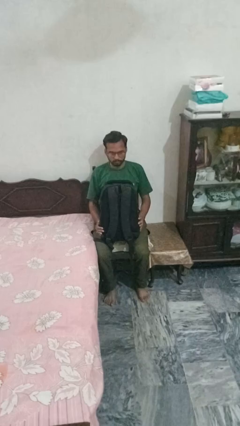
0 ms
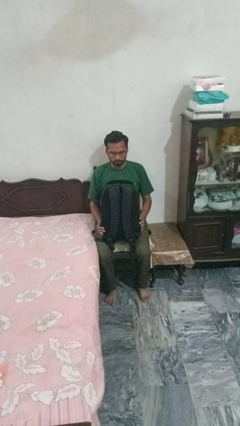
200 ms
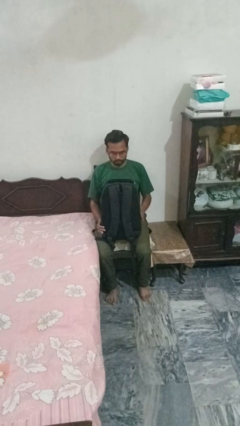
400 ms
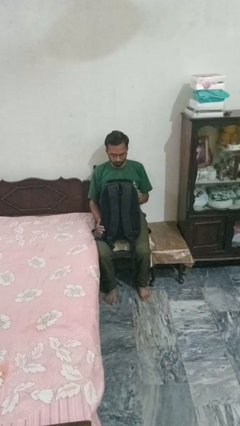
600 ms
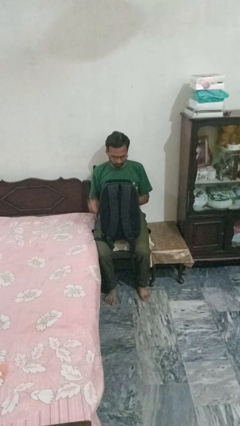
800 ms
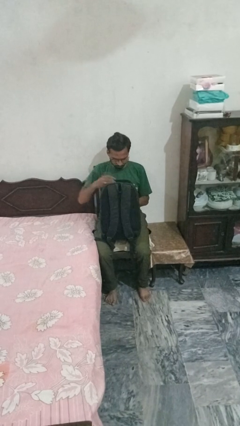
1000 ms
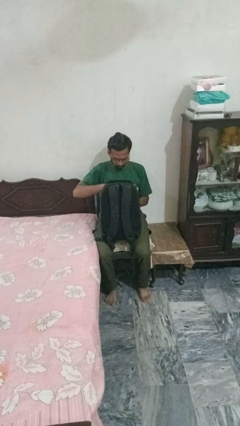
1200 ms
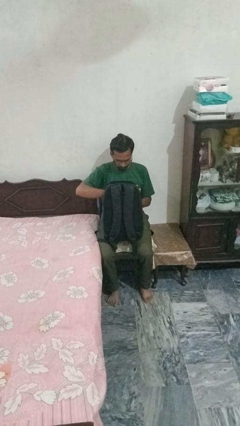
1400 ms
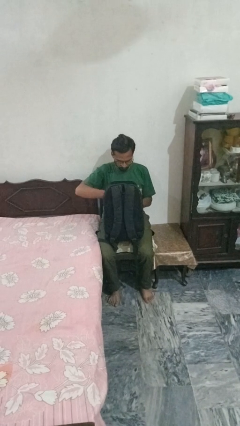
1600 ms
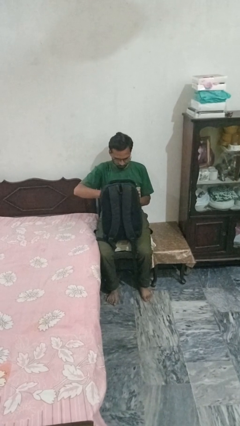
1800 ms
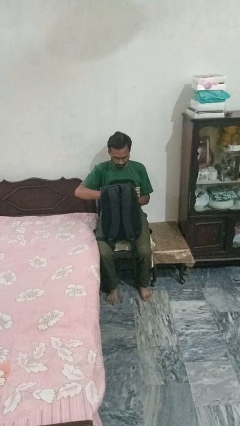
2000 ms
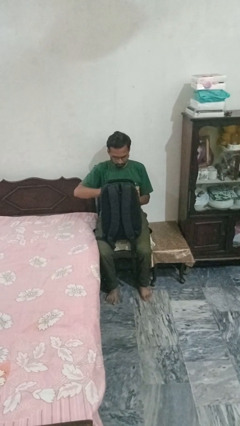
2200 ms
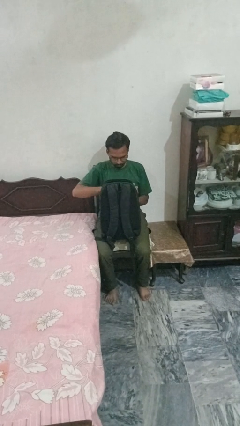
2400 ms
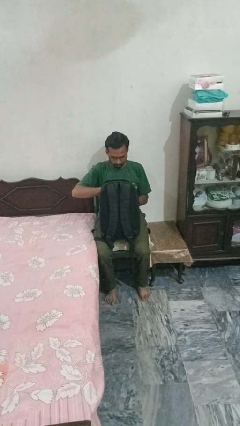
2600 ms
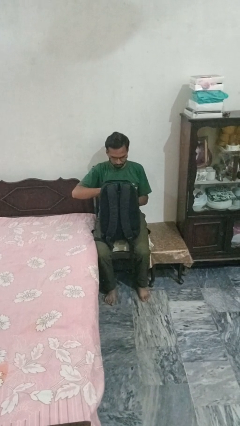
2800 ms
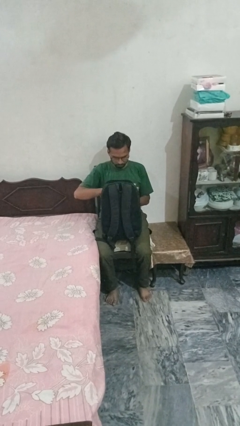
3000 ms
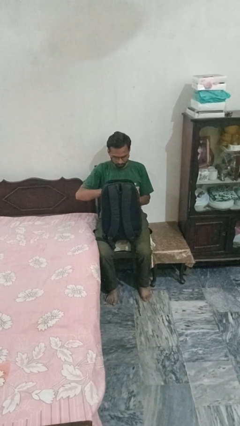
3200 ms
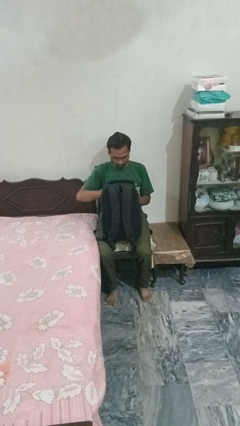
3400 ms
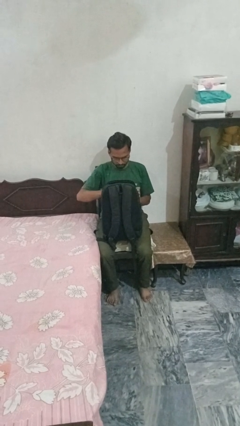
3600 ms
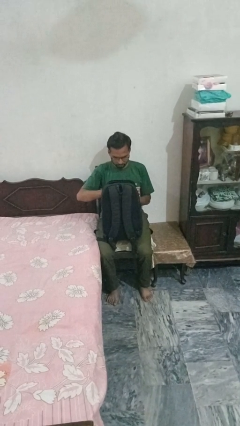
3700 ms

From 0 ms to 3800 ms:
person searches in backpack

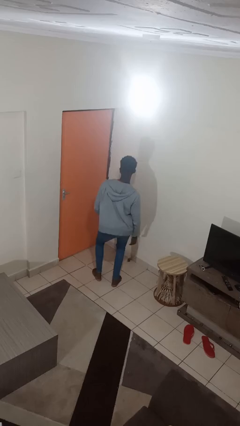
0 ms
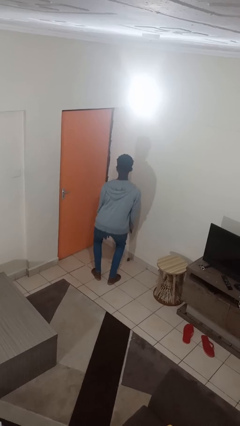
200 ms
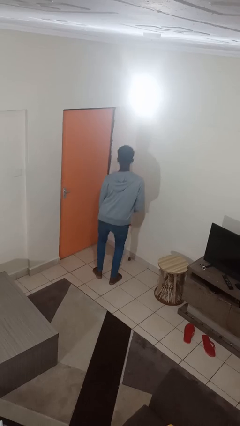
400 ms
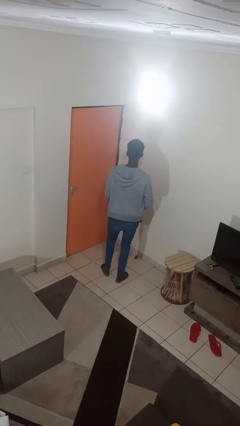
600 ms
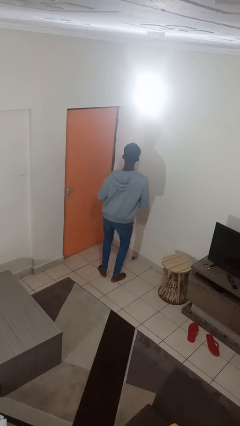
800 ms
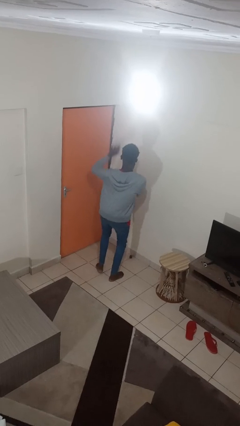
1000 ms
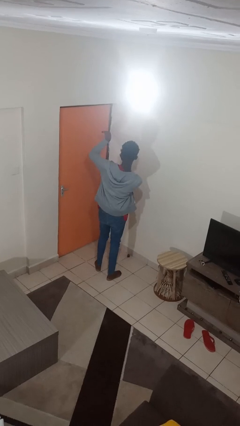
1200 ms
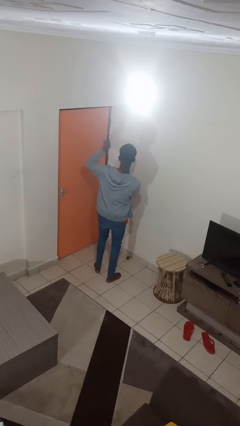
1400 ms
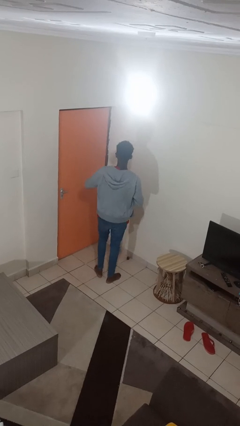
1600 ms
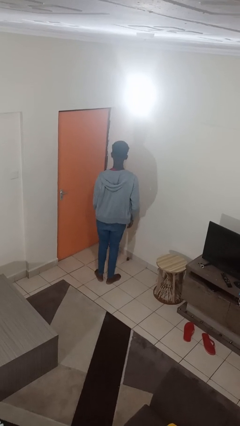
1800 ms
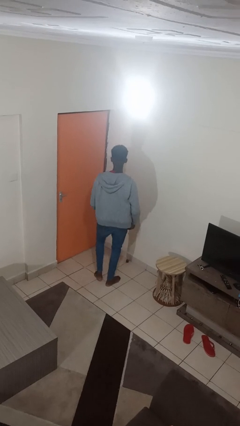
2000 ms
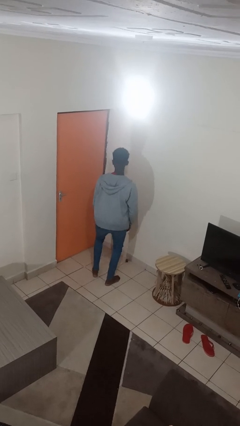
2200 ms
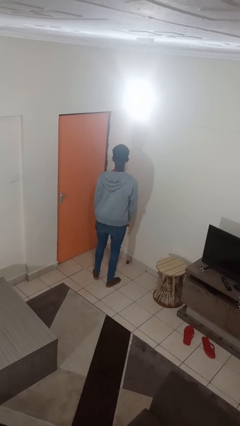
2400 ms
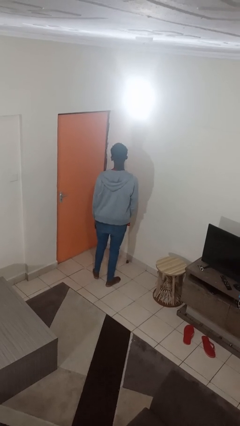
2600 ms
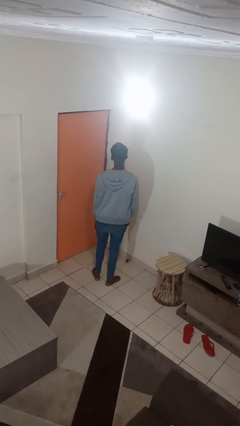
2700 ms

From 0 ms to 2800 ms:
person dances in place

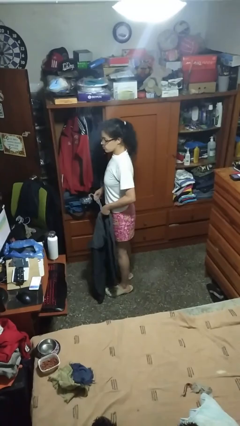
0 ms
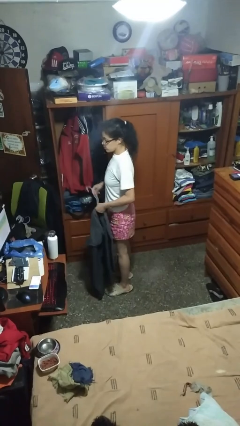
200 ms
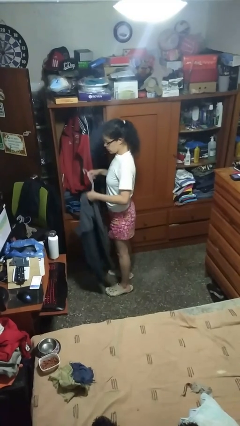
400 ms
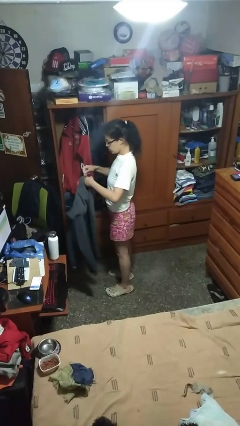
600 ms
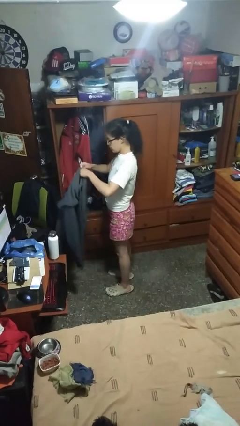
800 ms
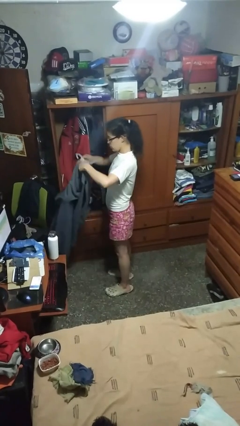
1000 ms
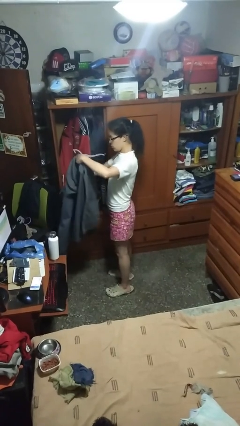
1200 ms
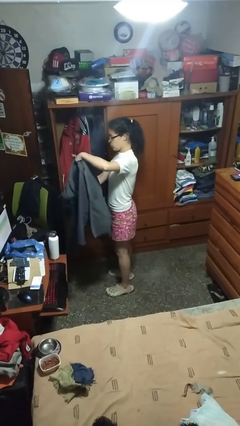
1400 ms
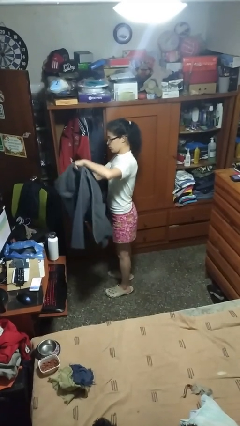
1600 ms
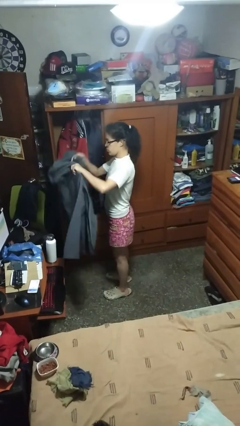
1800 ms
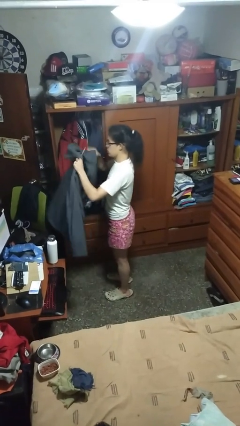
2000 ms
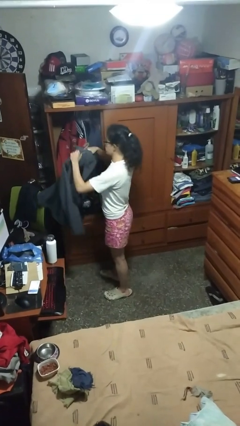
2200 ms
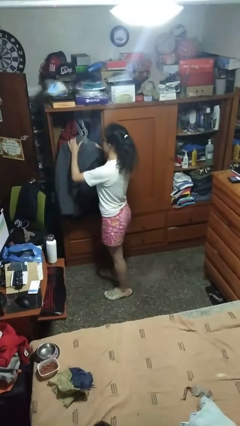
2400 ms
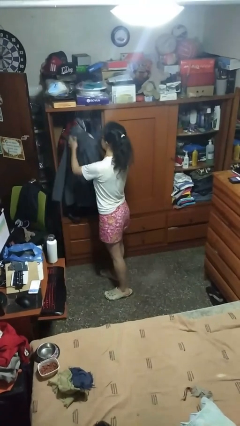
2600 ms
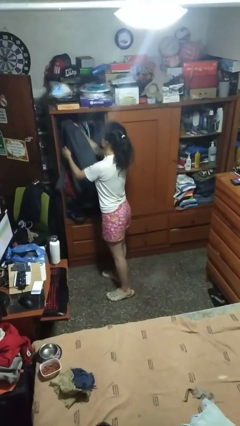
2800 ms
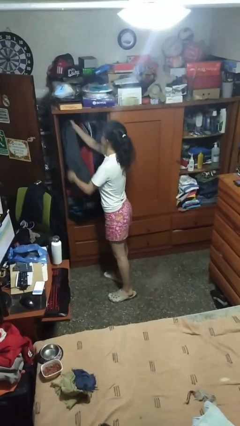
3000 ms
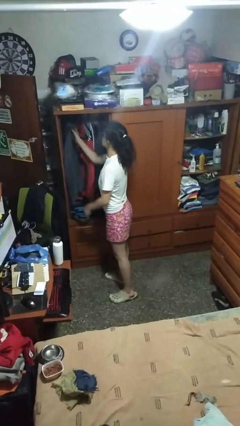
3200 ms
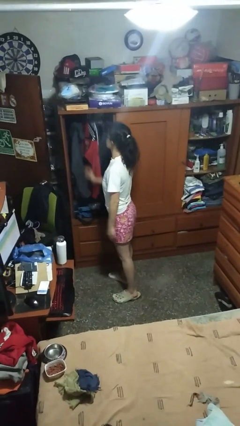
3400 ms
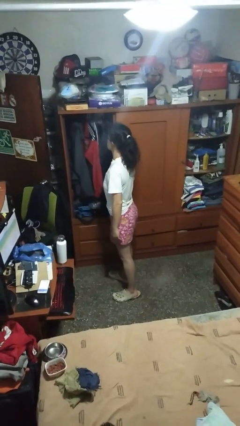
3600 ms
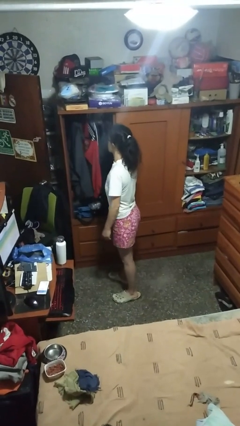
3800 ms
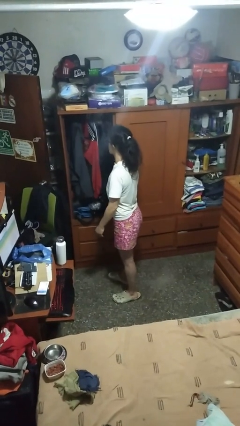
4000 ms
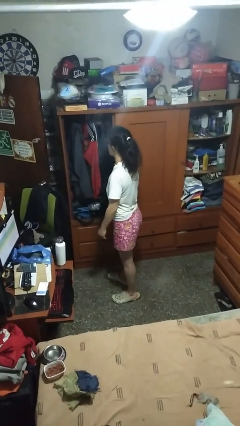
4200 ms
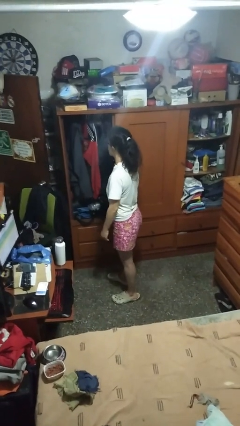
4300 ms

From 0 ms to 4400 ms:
person puts clothes into closet

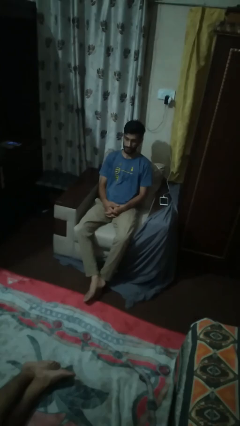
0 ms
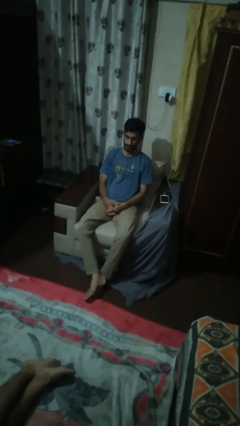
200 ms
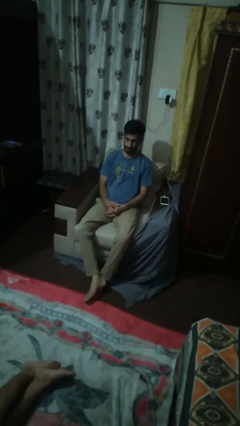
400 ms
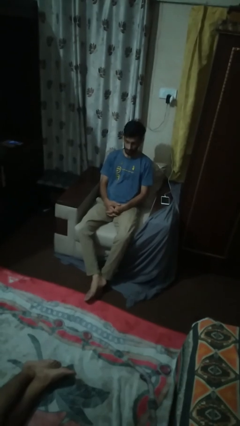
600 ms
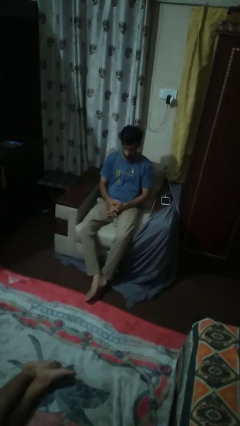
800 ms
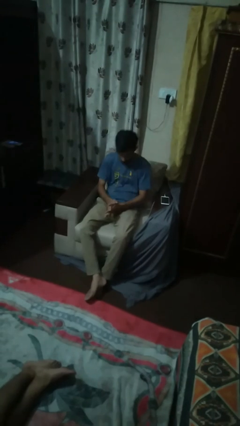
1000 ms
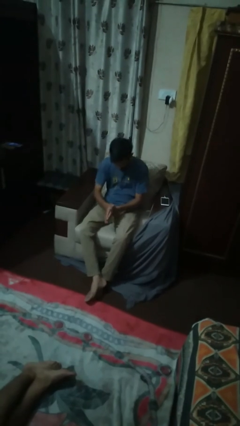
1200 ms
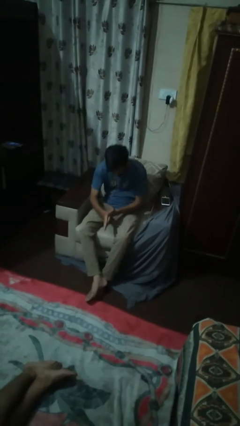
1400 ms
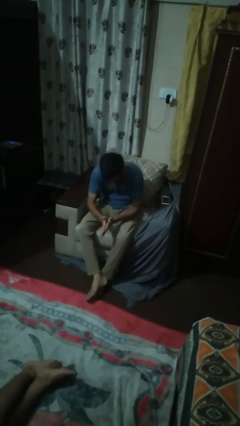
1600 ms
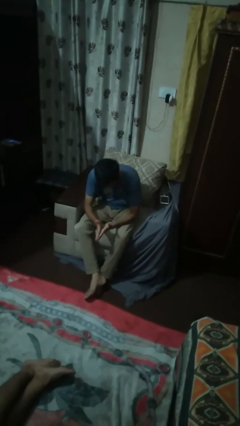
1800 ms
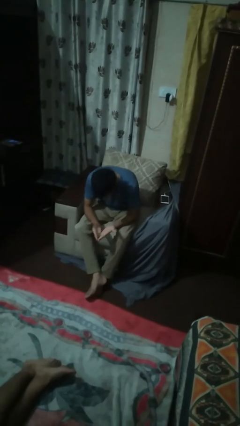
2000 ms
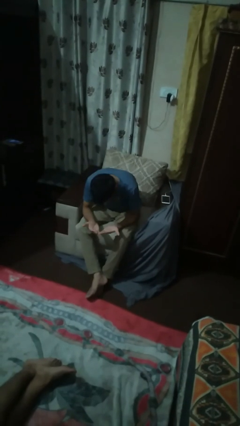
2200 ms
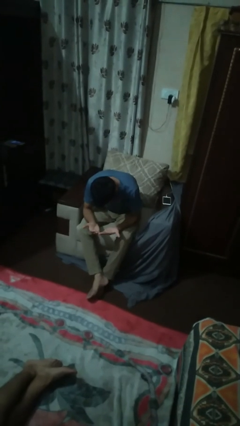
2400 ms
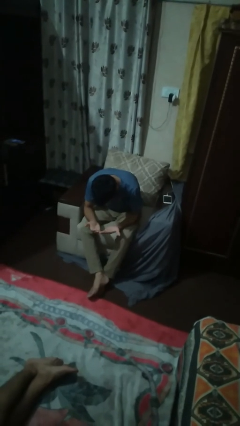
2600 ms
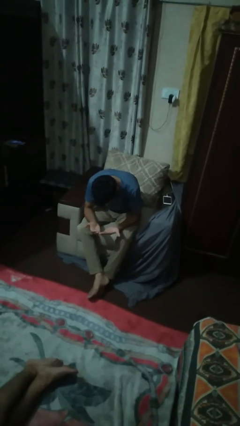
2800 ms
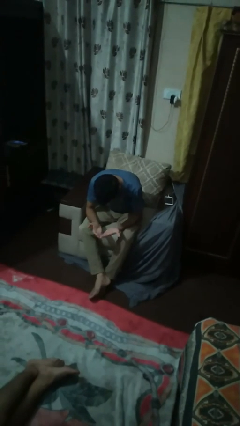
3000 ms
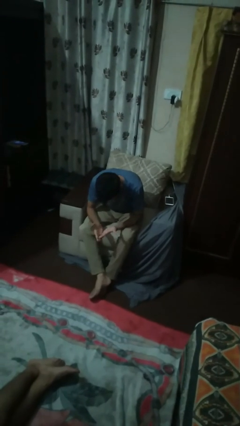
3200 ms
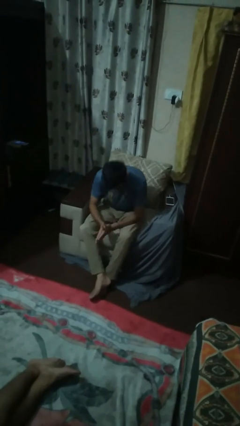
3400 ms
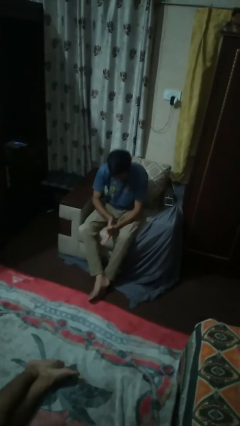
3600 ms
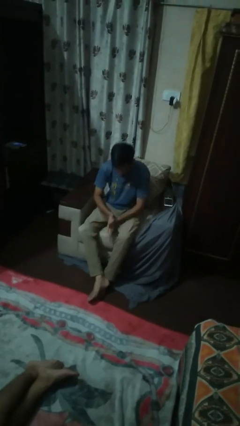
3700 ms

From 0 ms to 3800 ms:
person looks at hands in lap

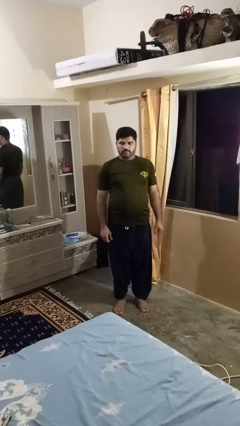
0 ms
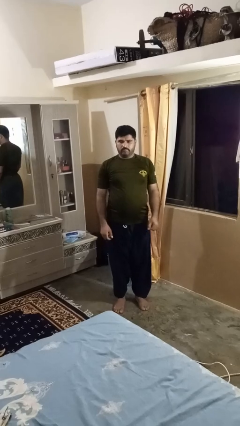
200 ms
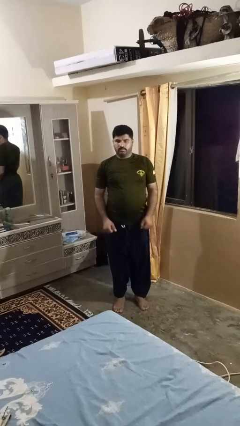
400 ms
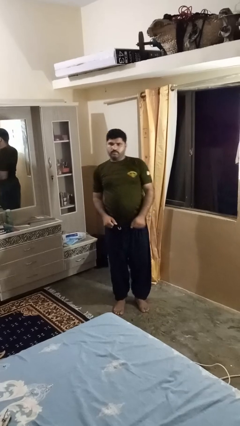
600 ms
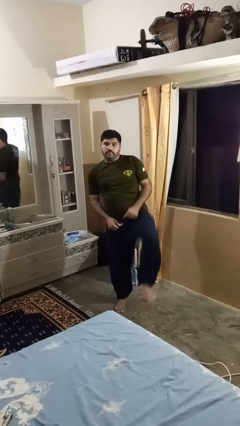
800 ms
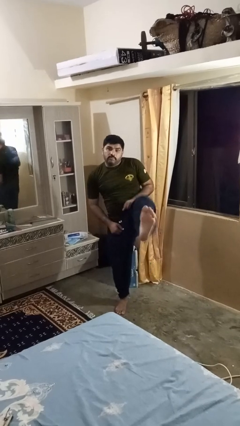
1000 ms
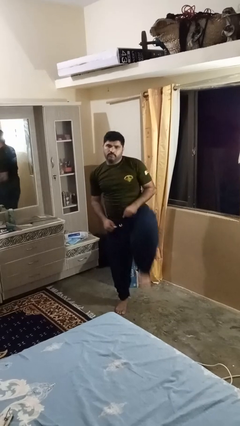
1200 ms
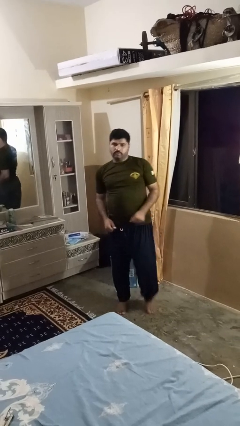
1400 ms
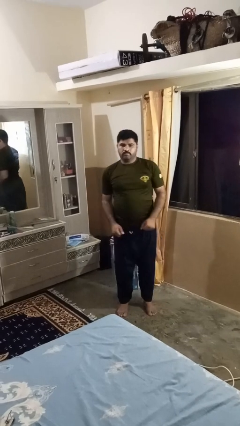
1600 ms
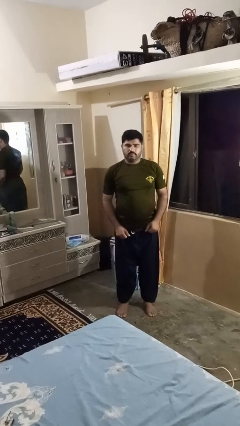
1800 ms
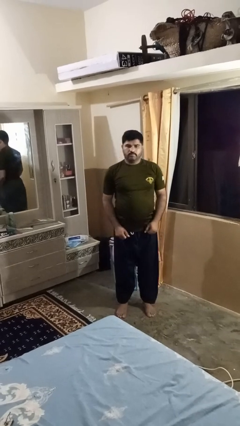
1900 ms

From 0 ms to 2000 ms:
person karate kicks

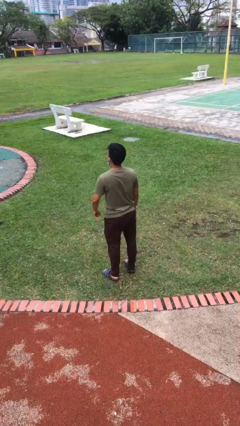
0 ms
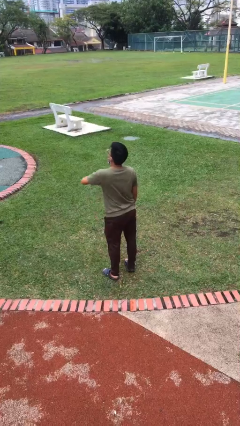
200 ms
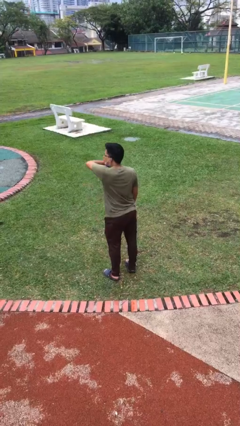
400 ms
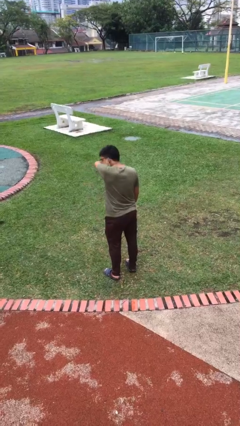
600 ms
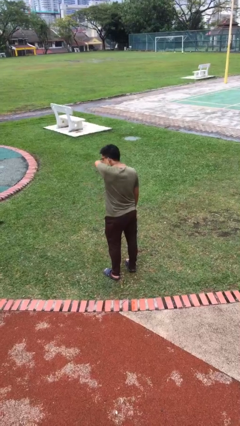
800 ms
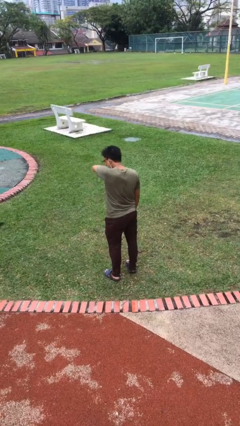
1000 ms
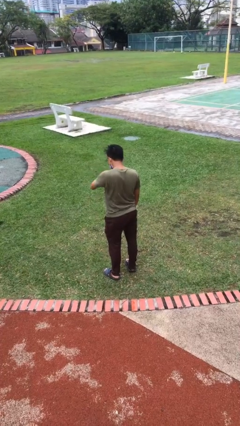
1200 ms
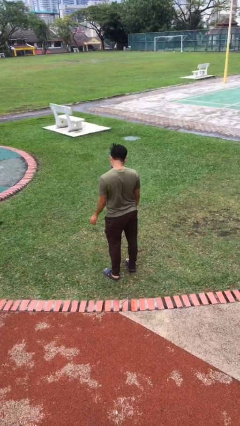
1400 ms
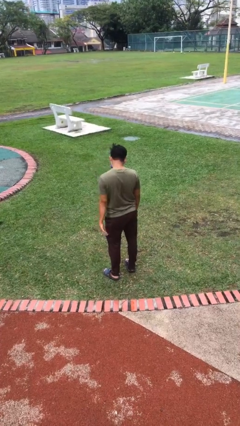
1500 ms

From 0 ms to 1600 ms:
person sneezes into arm
